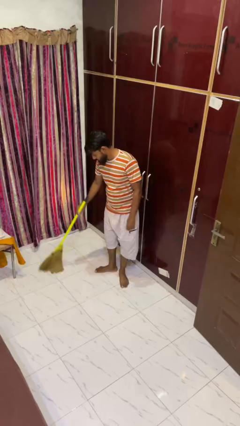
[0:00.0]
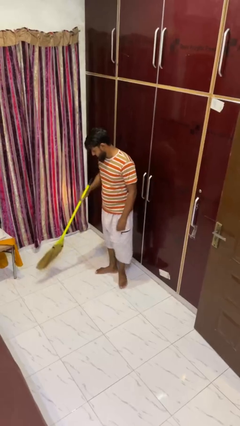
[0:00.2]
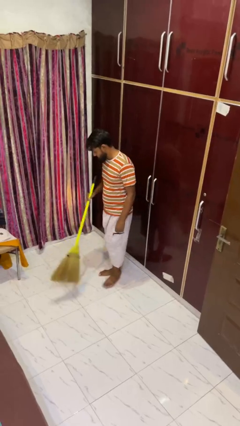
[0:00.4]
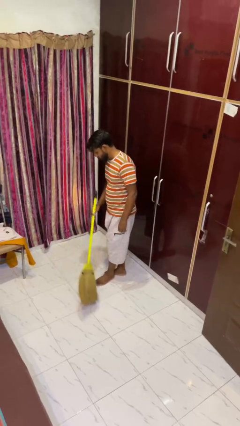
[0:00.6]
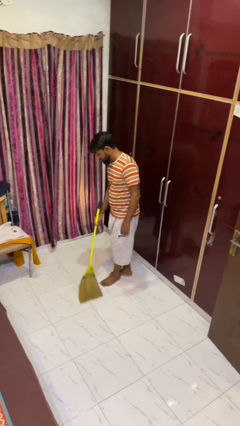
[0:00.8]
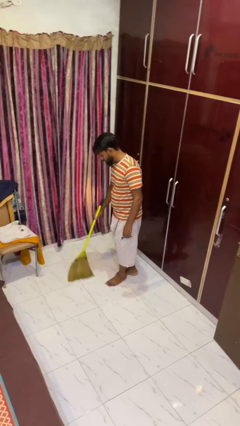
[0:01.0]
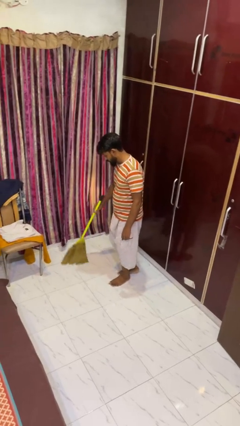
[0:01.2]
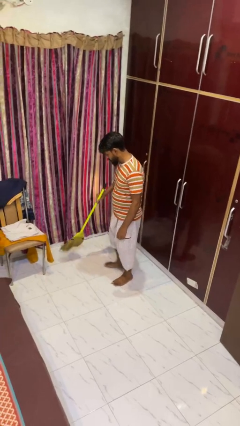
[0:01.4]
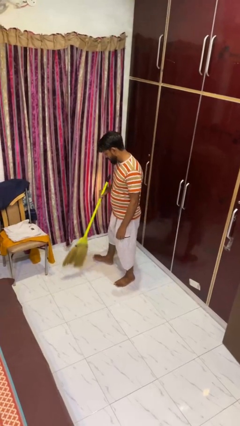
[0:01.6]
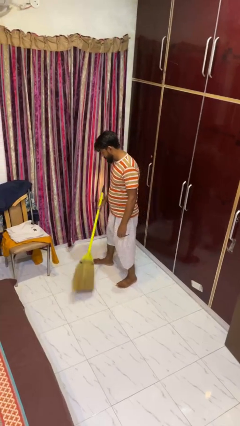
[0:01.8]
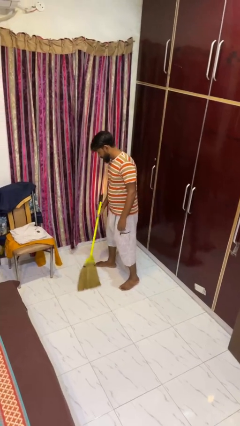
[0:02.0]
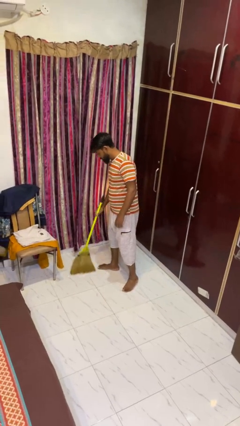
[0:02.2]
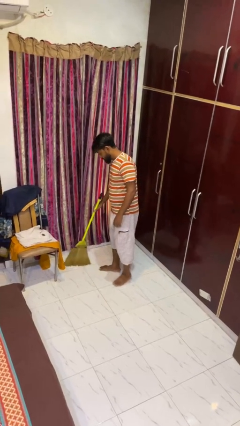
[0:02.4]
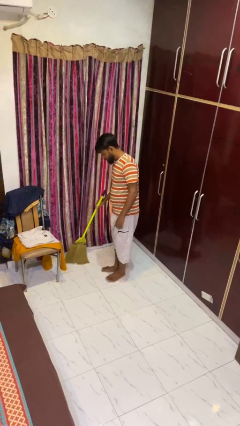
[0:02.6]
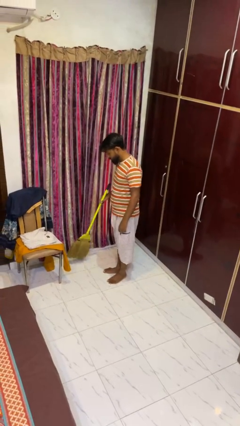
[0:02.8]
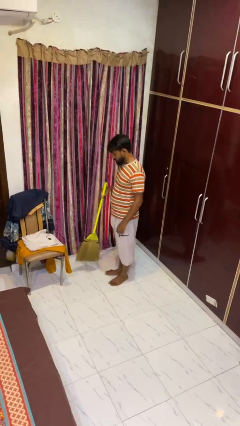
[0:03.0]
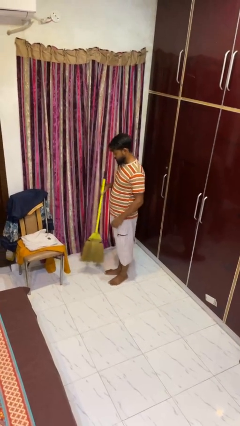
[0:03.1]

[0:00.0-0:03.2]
person sweeps floor

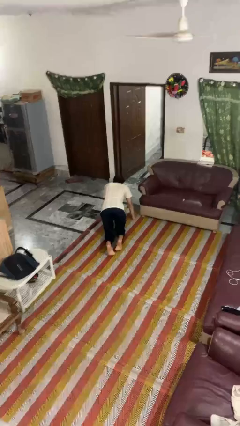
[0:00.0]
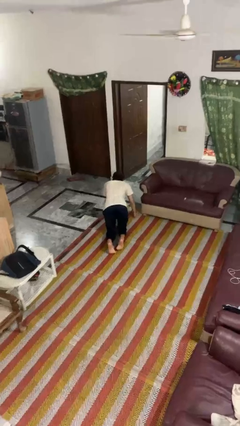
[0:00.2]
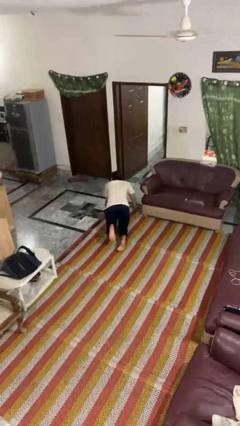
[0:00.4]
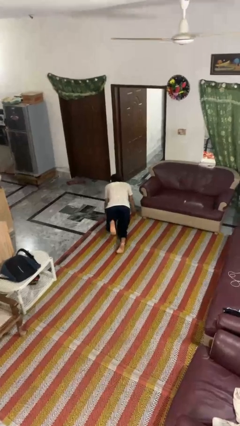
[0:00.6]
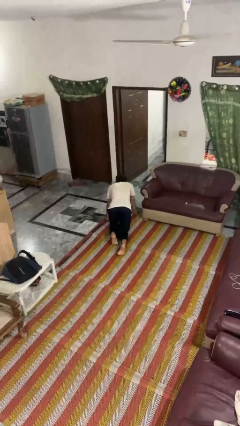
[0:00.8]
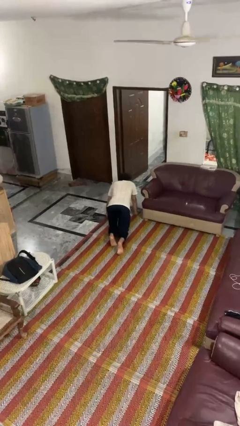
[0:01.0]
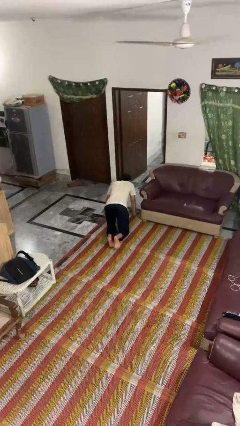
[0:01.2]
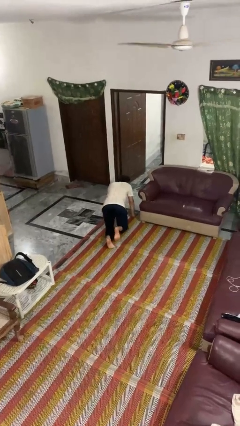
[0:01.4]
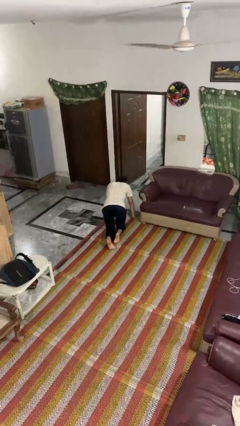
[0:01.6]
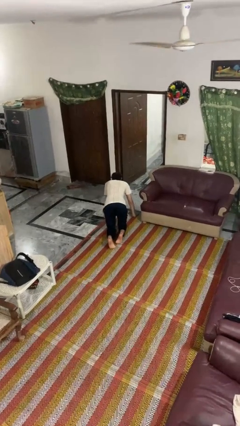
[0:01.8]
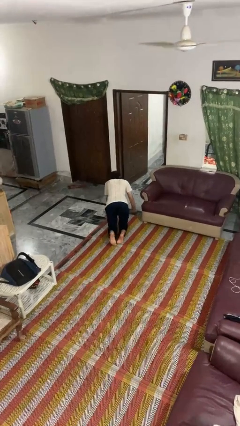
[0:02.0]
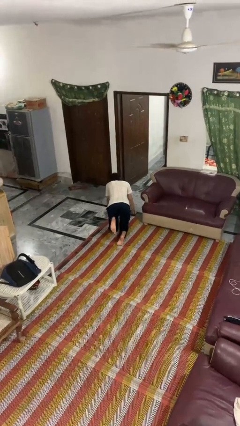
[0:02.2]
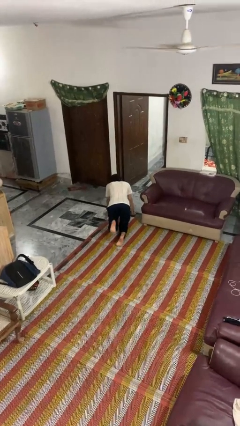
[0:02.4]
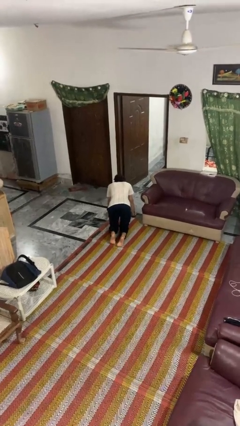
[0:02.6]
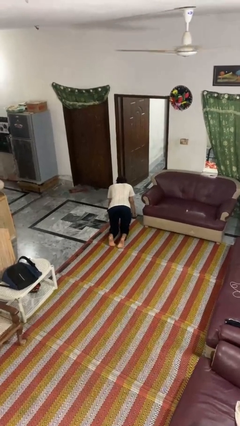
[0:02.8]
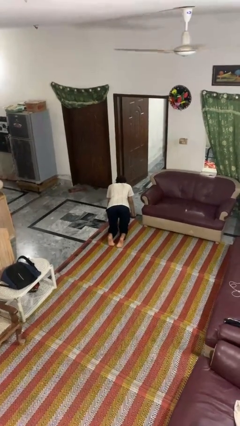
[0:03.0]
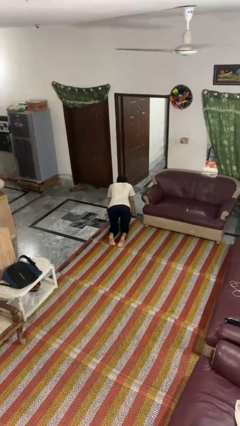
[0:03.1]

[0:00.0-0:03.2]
person crawls

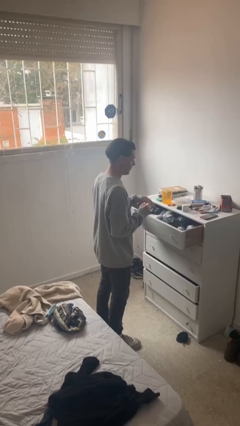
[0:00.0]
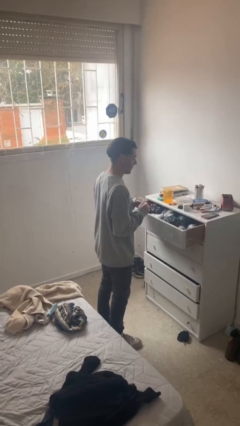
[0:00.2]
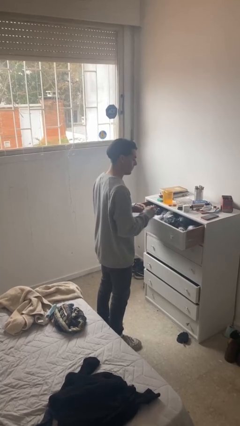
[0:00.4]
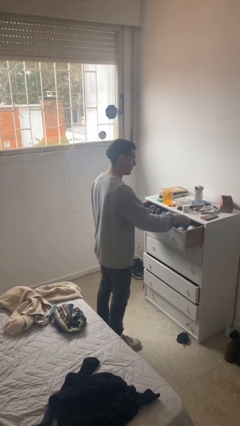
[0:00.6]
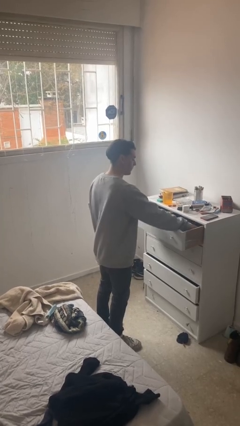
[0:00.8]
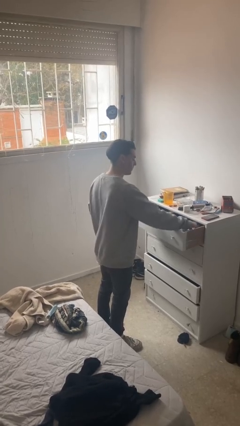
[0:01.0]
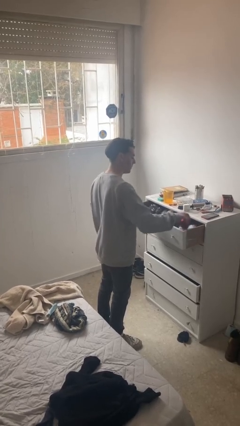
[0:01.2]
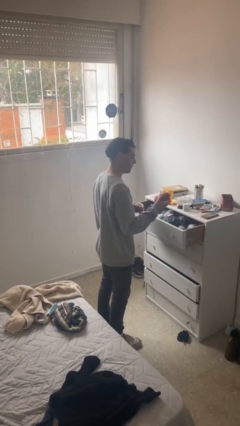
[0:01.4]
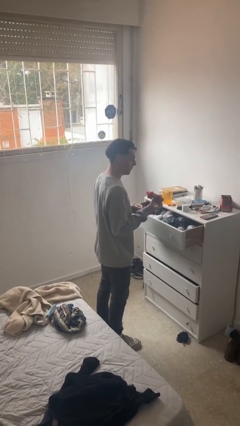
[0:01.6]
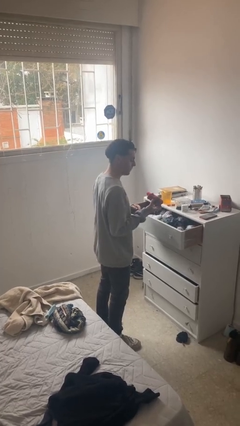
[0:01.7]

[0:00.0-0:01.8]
person takes clothes from dresser

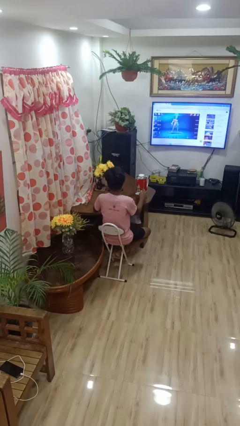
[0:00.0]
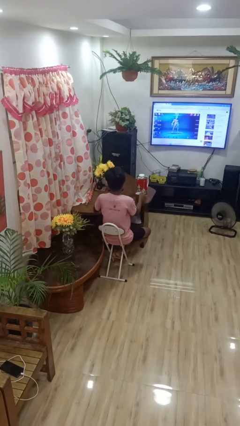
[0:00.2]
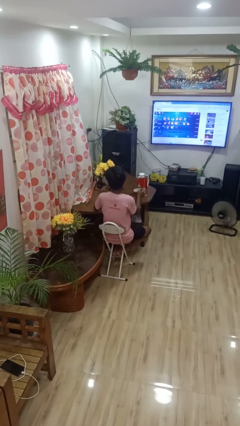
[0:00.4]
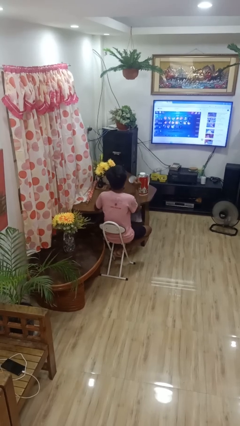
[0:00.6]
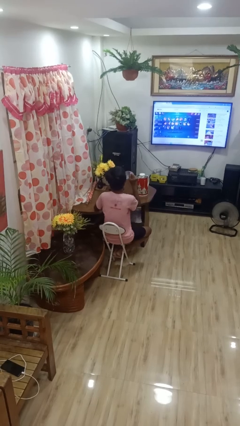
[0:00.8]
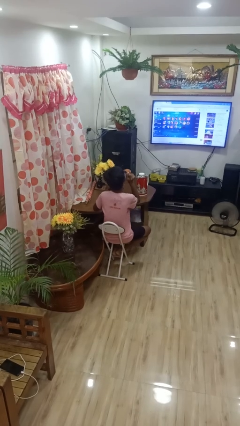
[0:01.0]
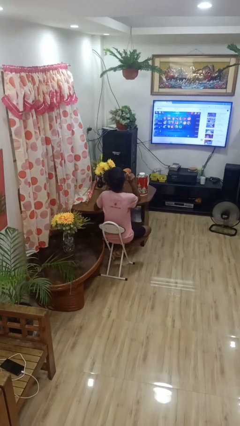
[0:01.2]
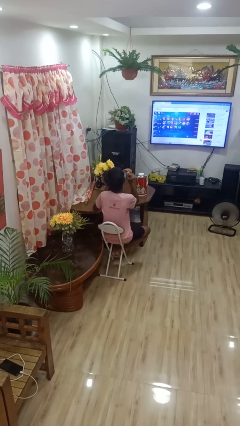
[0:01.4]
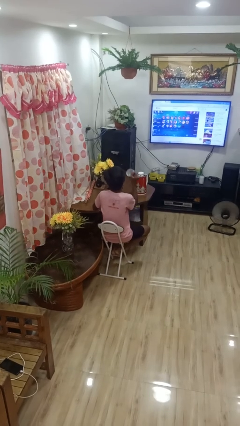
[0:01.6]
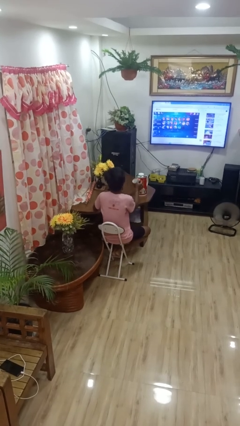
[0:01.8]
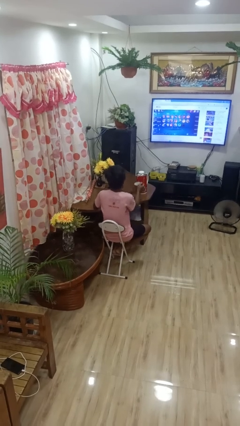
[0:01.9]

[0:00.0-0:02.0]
person drinks from mug

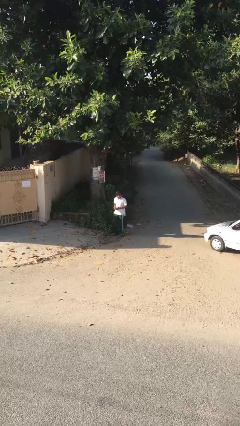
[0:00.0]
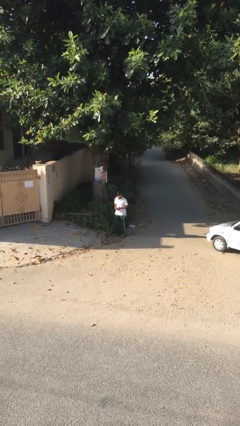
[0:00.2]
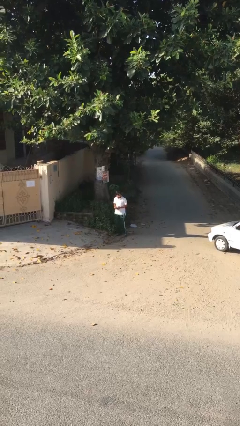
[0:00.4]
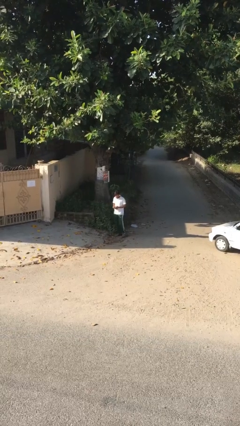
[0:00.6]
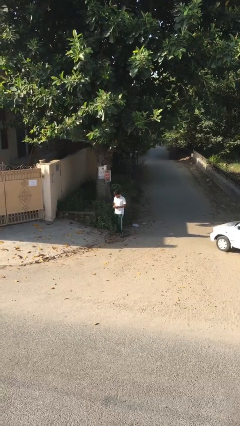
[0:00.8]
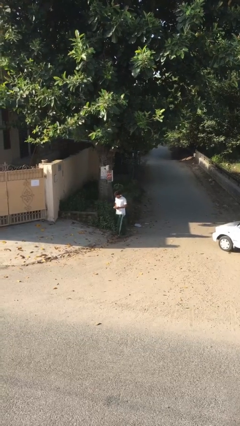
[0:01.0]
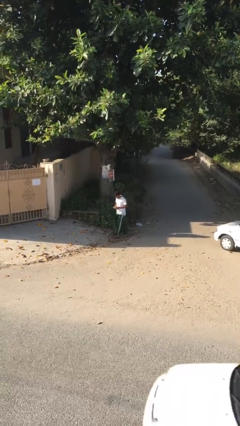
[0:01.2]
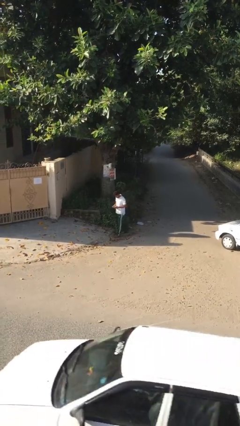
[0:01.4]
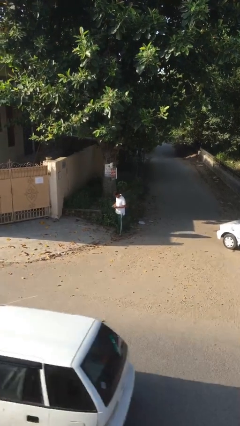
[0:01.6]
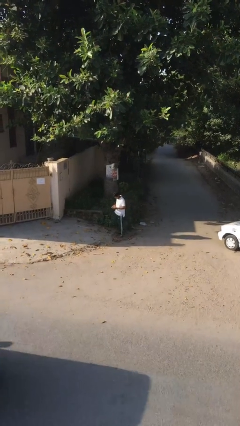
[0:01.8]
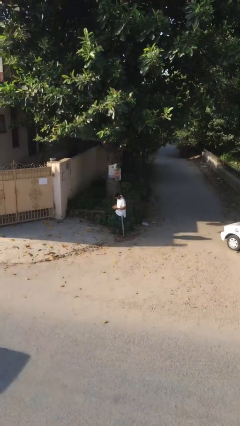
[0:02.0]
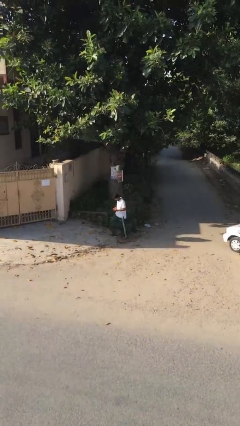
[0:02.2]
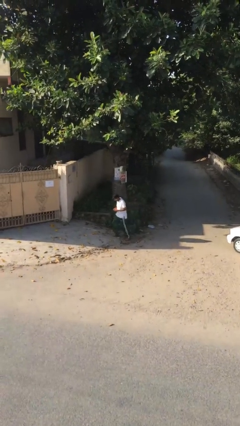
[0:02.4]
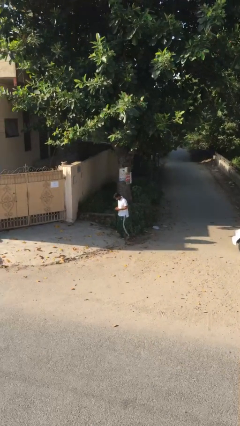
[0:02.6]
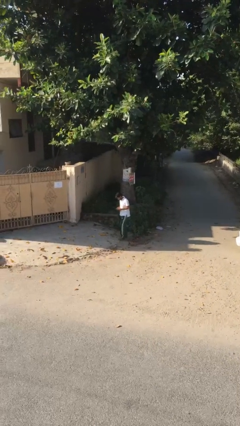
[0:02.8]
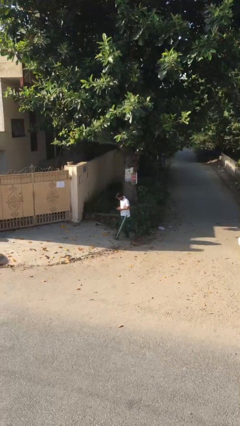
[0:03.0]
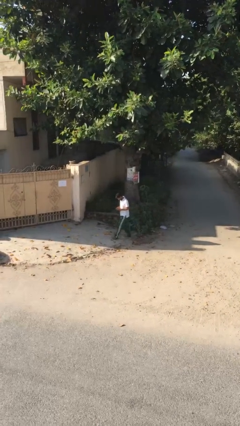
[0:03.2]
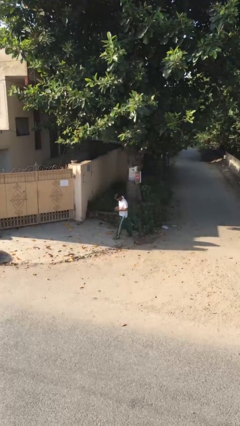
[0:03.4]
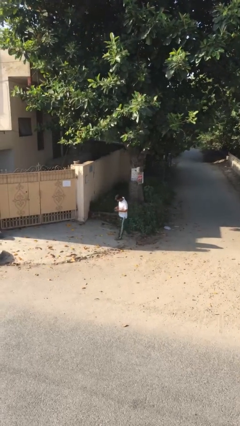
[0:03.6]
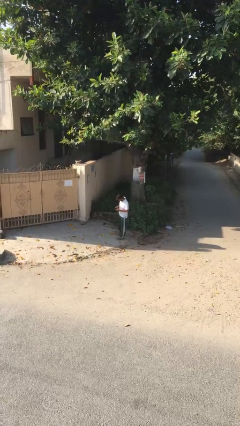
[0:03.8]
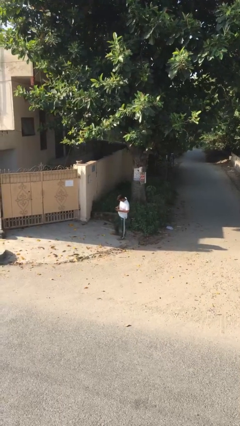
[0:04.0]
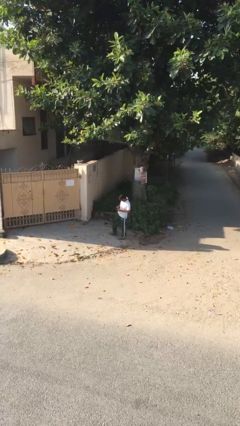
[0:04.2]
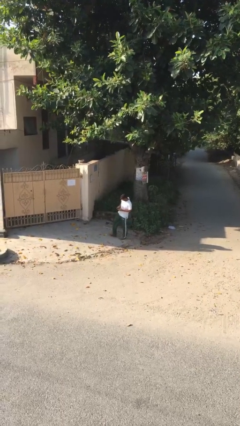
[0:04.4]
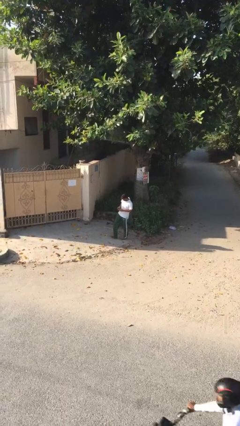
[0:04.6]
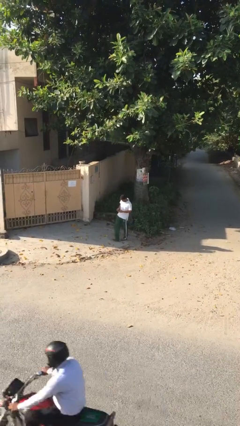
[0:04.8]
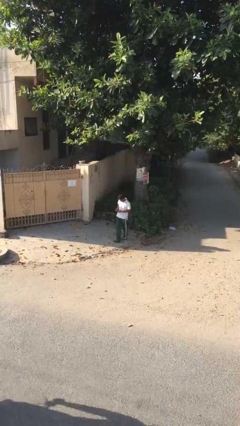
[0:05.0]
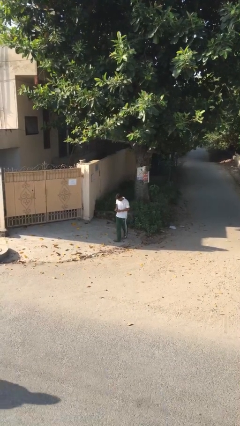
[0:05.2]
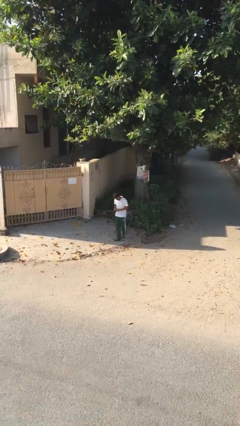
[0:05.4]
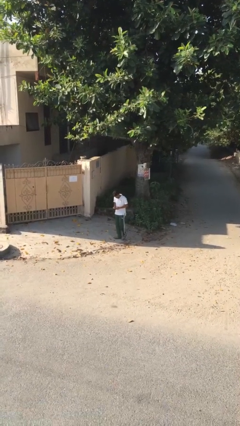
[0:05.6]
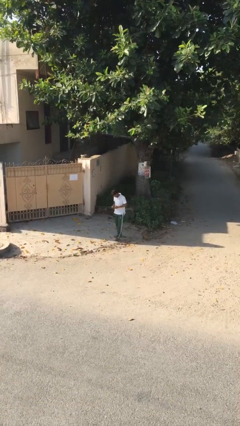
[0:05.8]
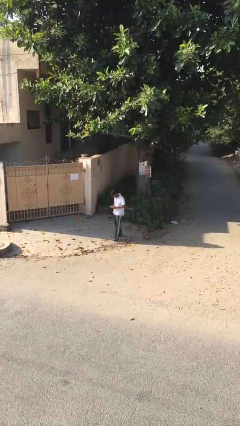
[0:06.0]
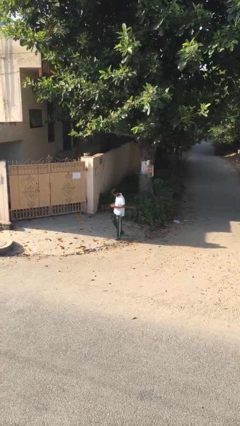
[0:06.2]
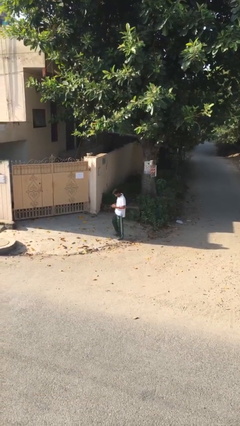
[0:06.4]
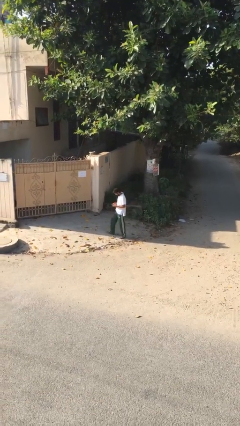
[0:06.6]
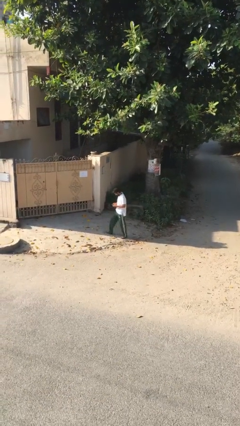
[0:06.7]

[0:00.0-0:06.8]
person texts on phone

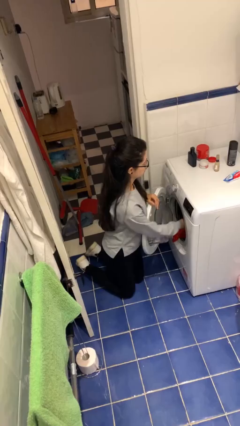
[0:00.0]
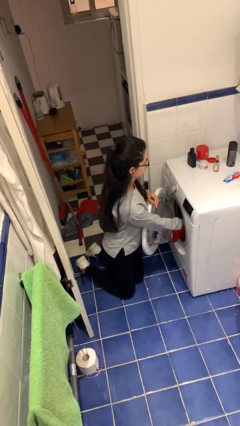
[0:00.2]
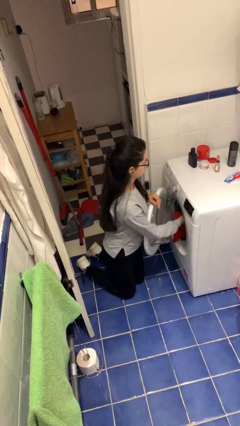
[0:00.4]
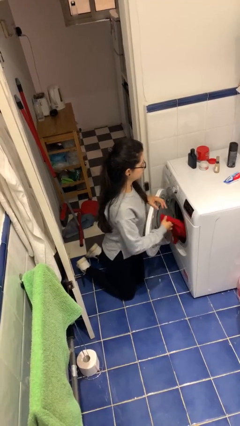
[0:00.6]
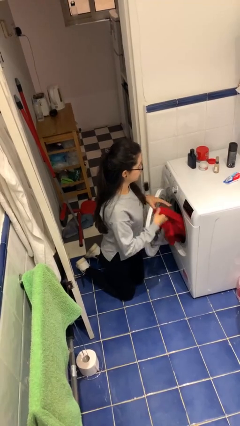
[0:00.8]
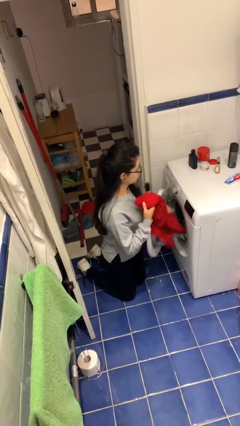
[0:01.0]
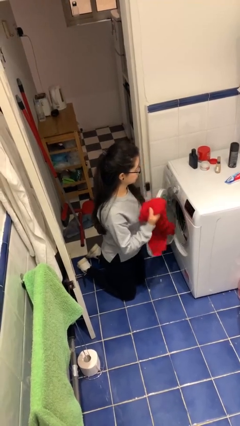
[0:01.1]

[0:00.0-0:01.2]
person unloads dryer
